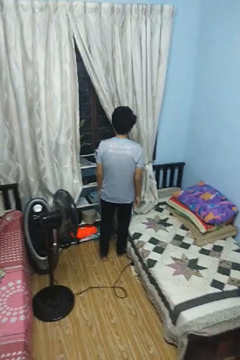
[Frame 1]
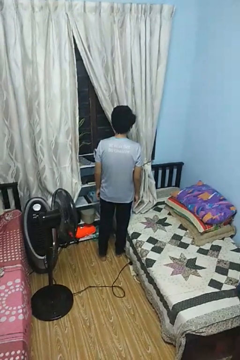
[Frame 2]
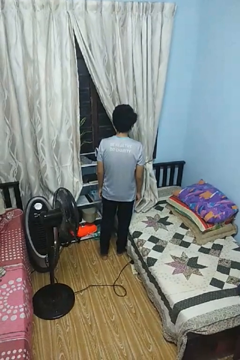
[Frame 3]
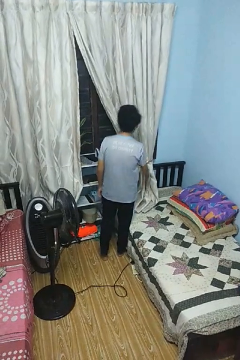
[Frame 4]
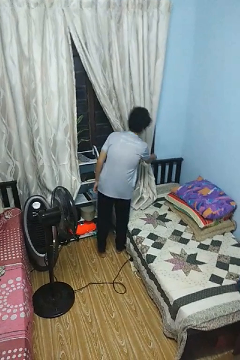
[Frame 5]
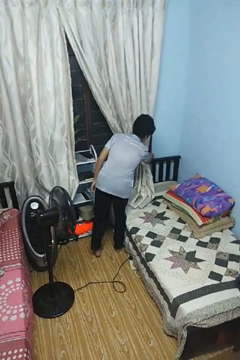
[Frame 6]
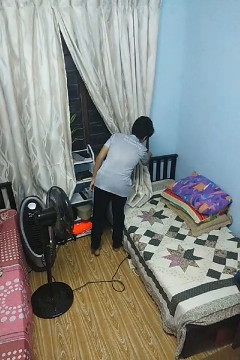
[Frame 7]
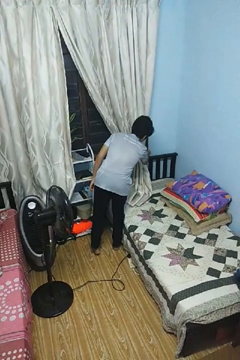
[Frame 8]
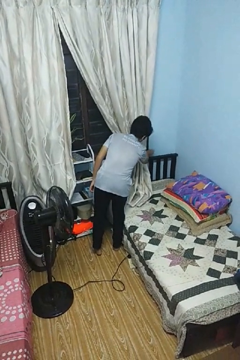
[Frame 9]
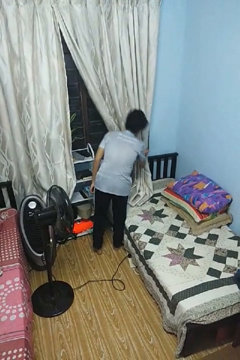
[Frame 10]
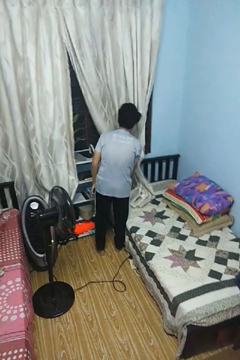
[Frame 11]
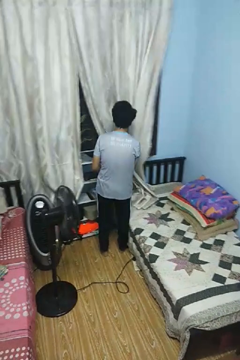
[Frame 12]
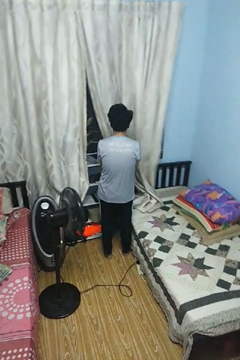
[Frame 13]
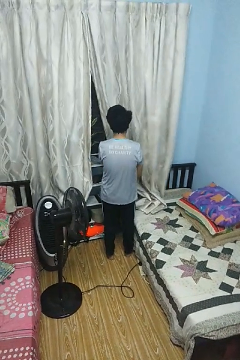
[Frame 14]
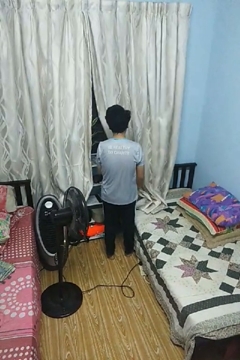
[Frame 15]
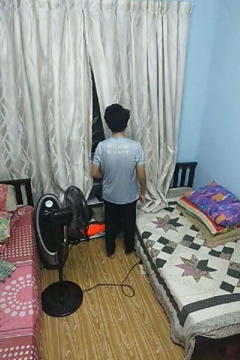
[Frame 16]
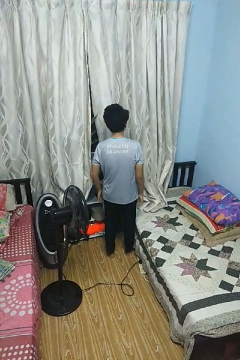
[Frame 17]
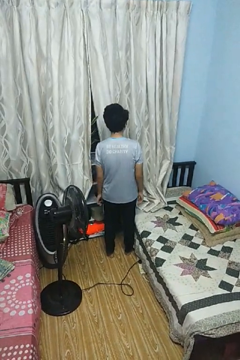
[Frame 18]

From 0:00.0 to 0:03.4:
person closes curtains

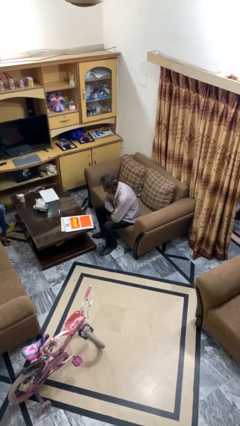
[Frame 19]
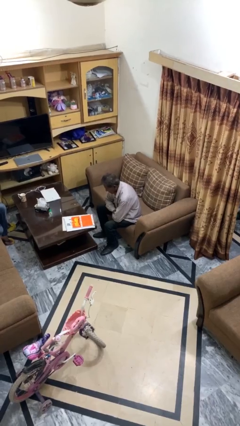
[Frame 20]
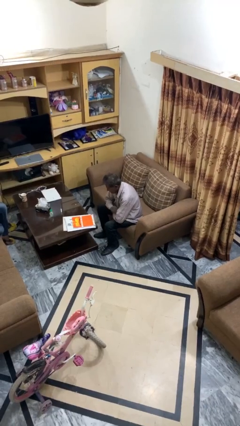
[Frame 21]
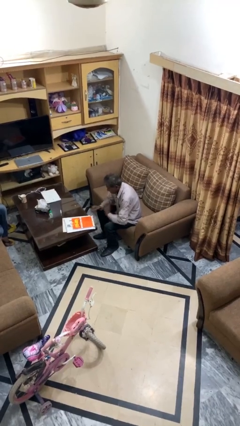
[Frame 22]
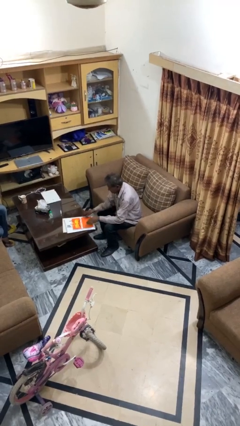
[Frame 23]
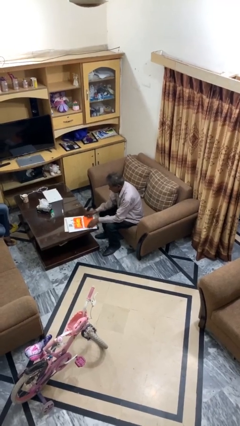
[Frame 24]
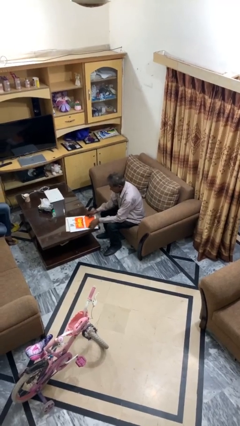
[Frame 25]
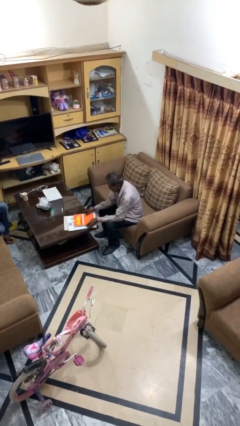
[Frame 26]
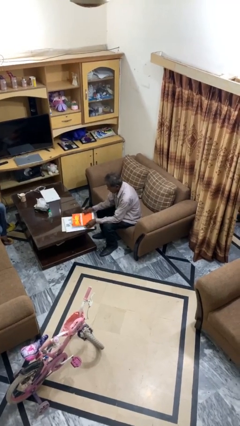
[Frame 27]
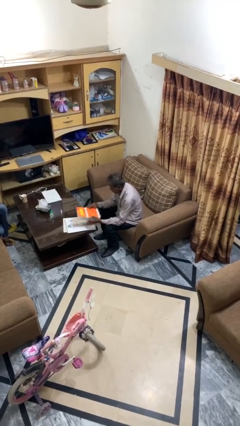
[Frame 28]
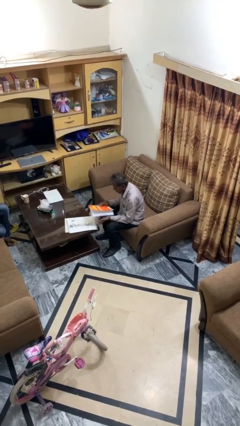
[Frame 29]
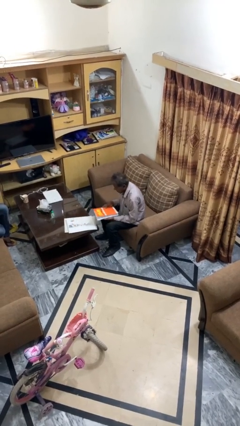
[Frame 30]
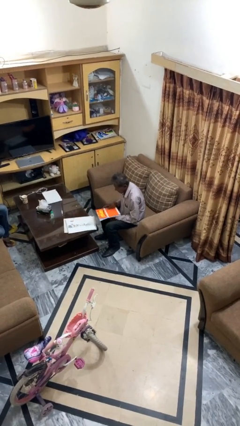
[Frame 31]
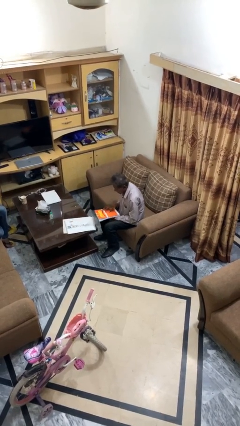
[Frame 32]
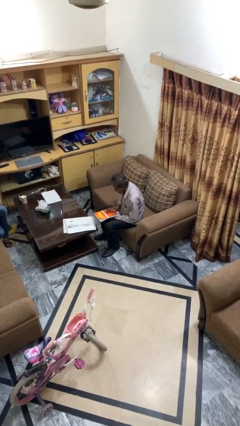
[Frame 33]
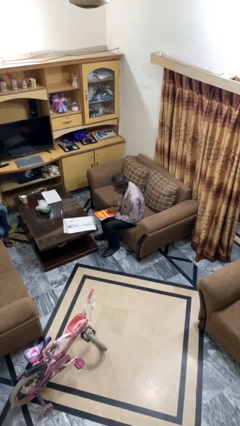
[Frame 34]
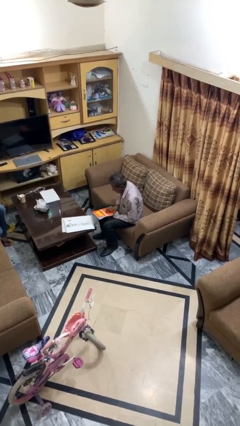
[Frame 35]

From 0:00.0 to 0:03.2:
person picks up object from table

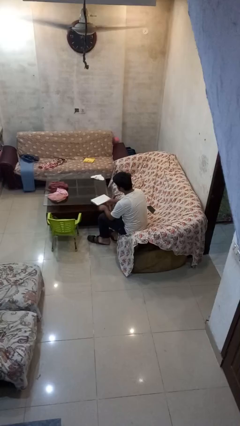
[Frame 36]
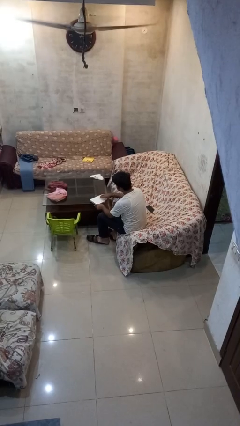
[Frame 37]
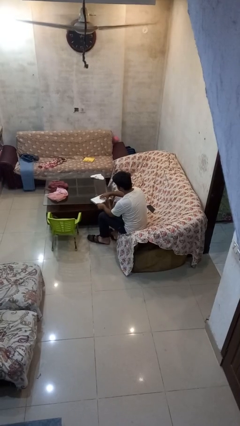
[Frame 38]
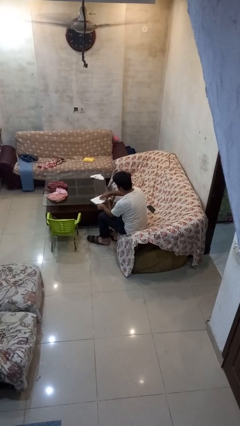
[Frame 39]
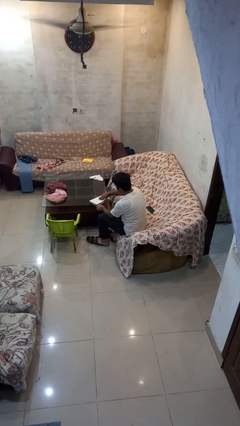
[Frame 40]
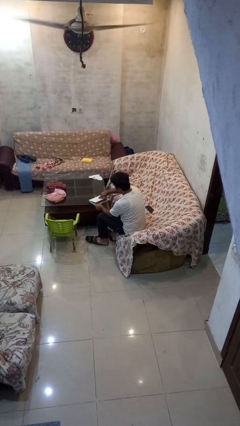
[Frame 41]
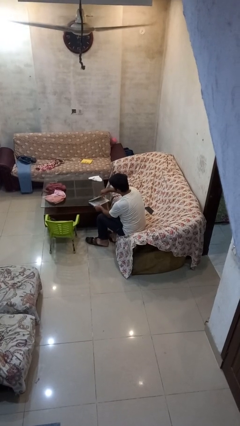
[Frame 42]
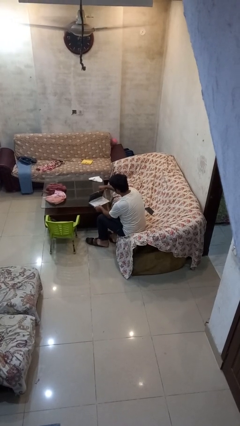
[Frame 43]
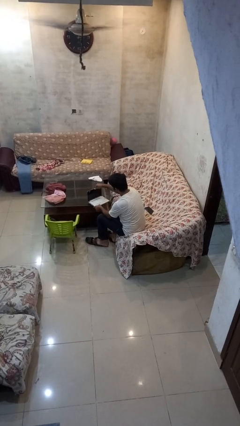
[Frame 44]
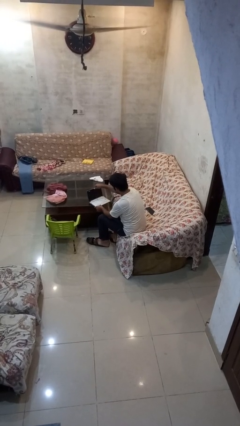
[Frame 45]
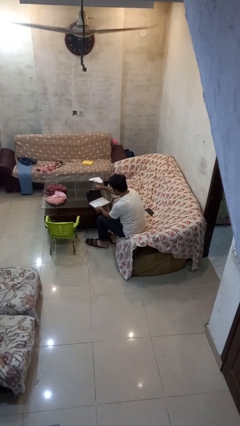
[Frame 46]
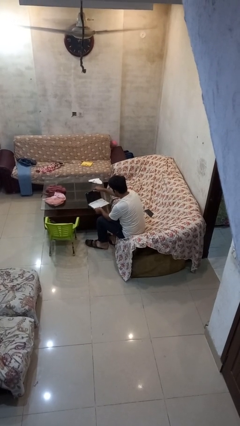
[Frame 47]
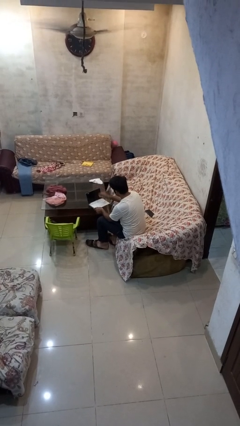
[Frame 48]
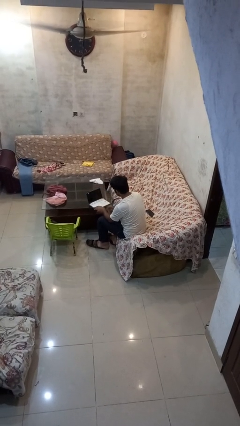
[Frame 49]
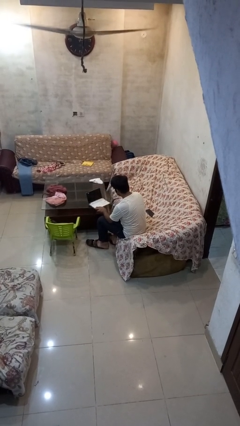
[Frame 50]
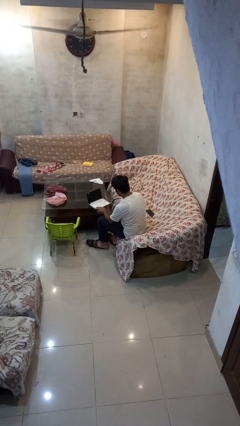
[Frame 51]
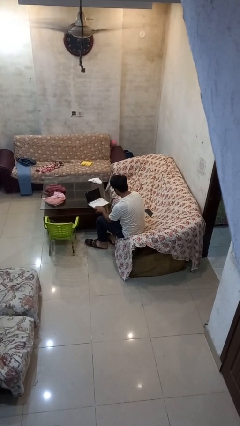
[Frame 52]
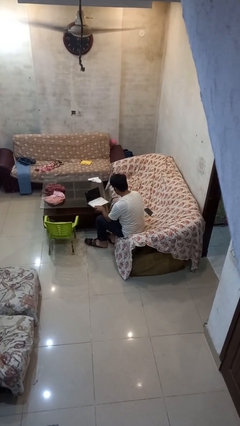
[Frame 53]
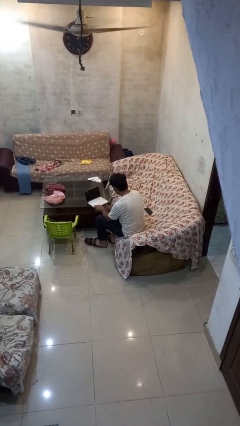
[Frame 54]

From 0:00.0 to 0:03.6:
person opens laptop

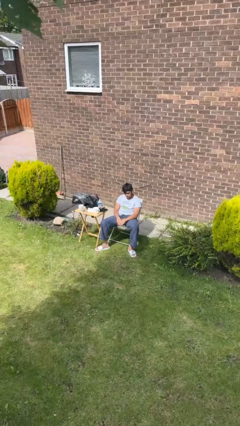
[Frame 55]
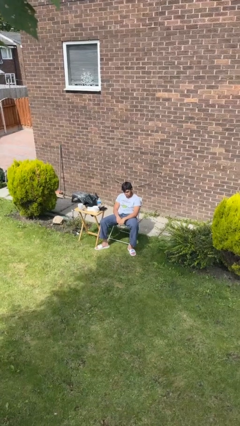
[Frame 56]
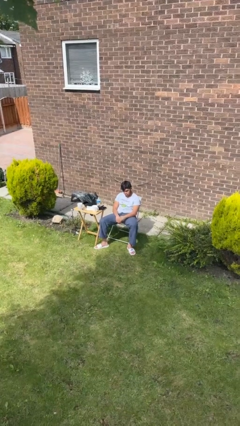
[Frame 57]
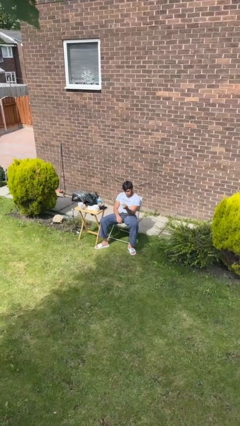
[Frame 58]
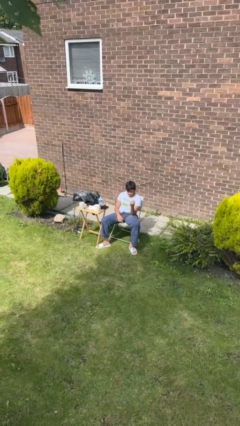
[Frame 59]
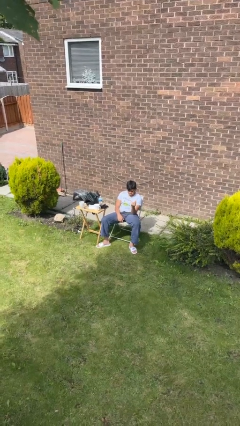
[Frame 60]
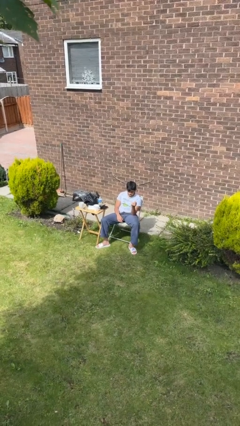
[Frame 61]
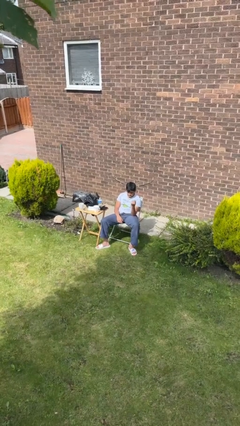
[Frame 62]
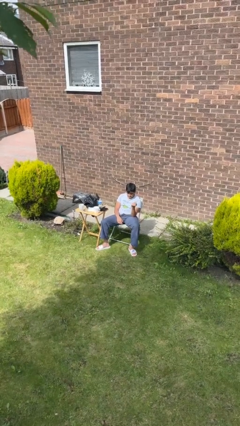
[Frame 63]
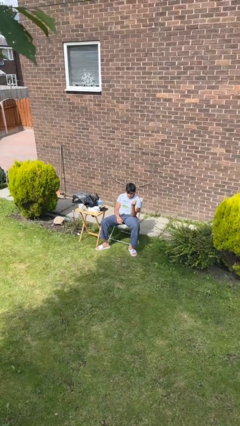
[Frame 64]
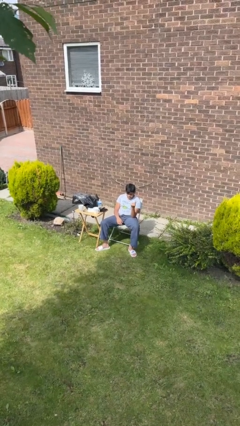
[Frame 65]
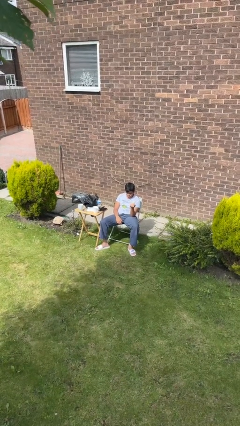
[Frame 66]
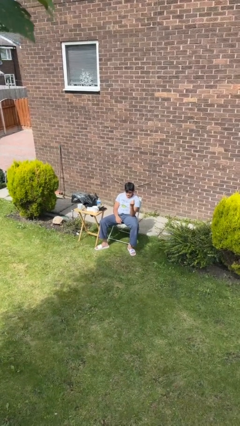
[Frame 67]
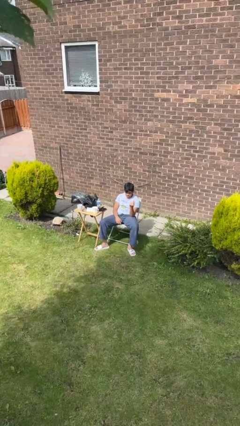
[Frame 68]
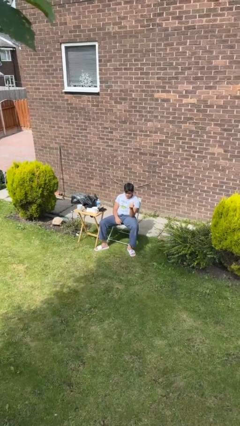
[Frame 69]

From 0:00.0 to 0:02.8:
person snaps fingers

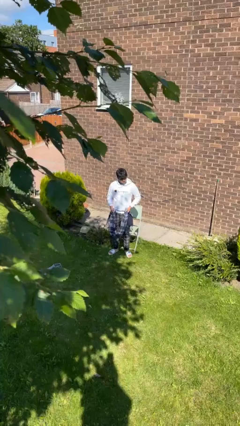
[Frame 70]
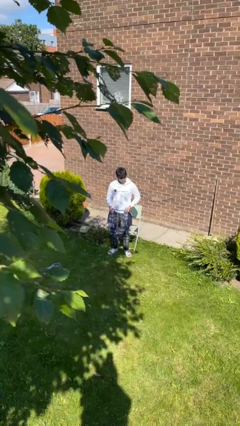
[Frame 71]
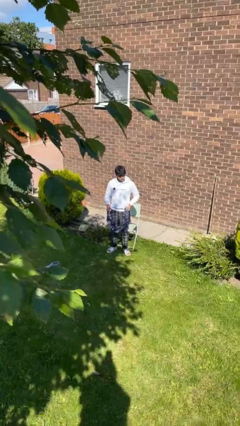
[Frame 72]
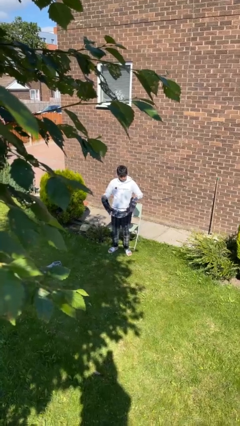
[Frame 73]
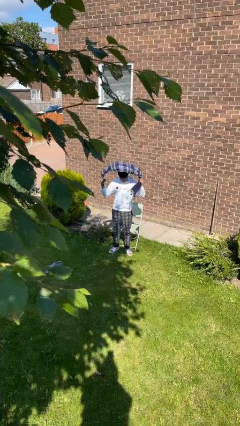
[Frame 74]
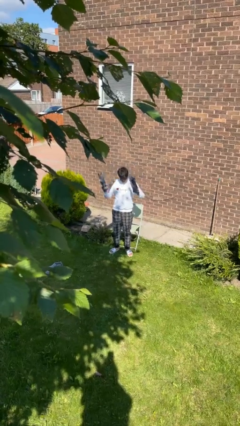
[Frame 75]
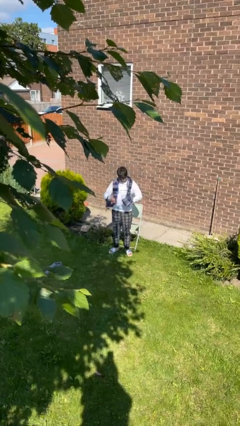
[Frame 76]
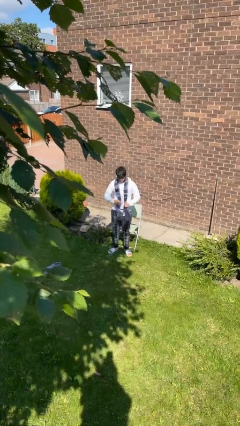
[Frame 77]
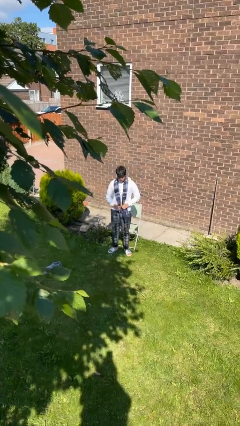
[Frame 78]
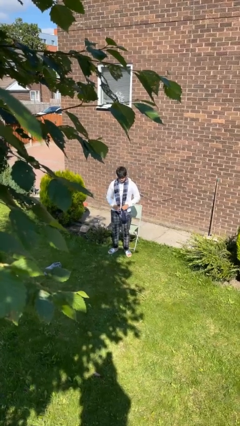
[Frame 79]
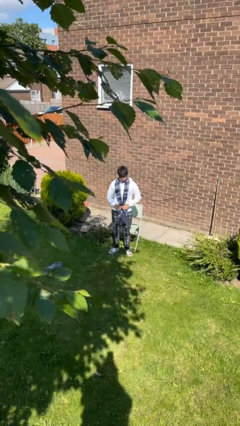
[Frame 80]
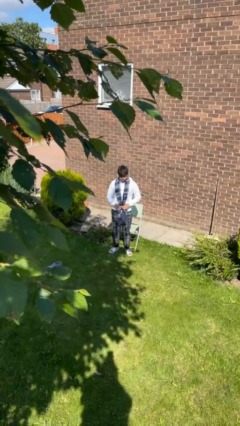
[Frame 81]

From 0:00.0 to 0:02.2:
person puts on scarf

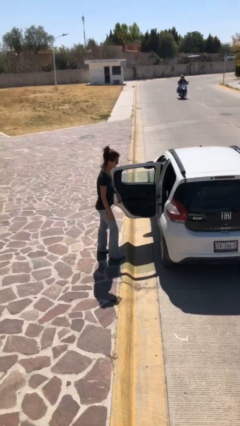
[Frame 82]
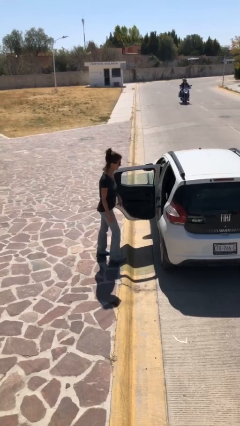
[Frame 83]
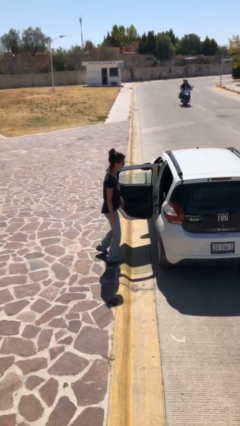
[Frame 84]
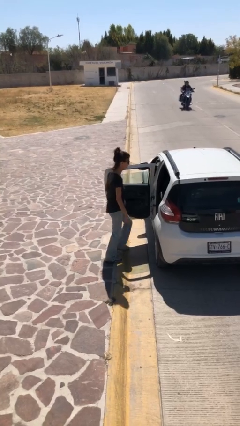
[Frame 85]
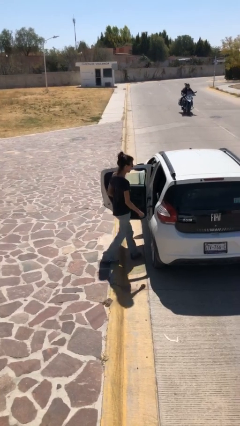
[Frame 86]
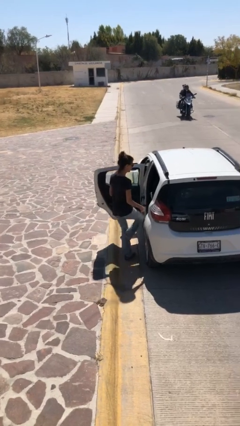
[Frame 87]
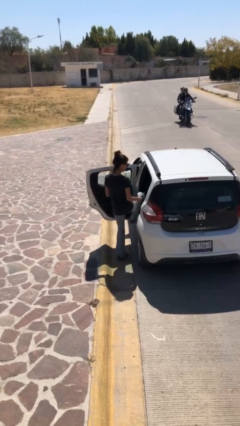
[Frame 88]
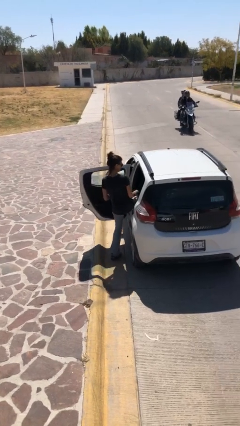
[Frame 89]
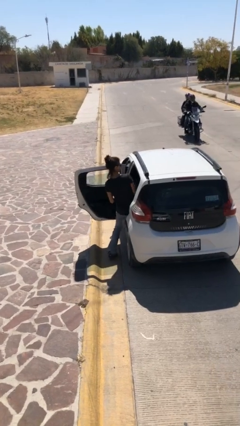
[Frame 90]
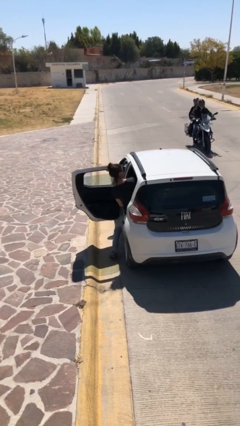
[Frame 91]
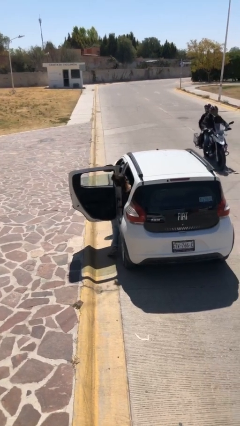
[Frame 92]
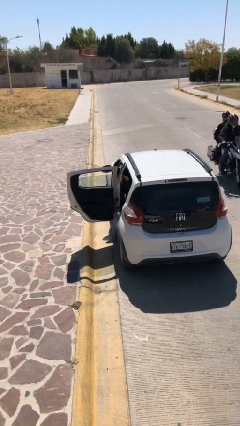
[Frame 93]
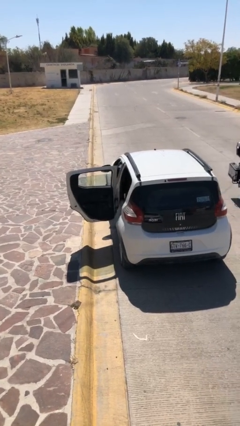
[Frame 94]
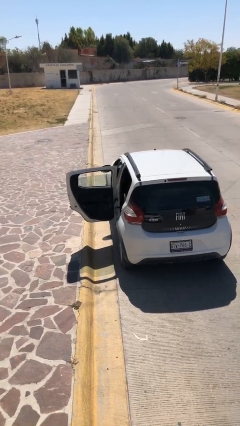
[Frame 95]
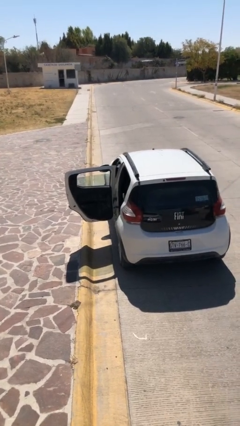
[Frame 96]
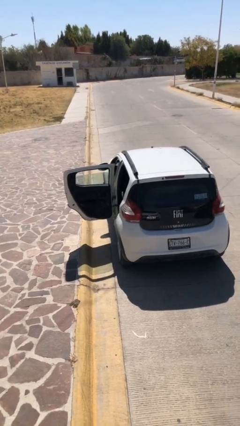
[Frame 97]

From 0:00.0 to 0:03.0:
person enters car
